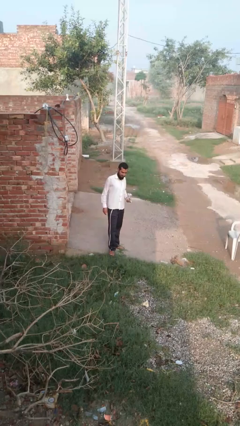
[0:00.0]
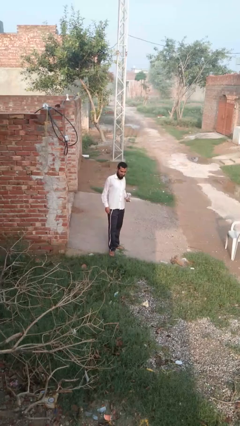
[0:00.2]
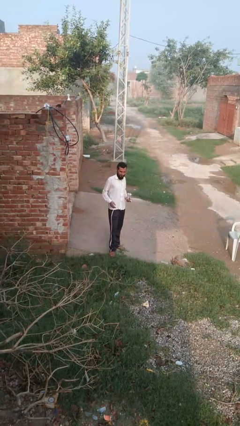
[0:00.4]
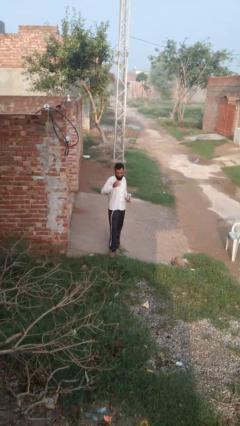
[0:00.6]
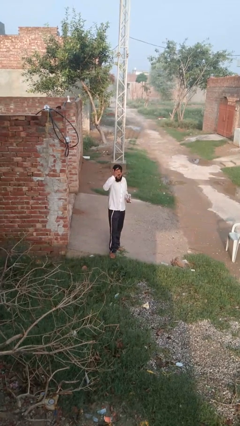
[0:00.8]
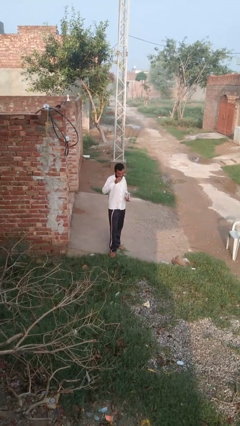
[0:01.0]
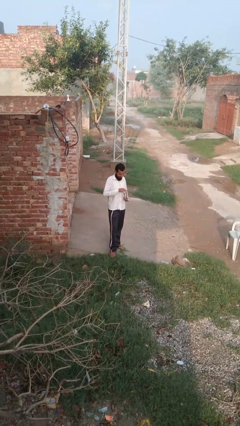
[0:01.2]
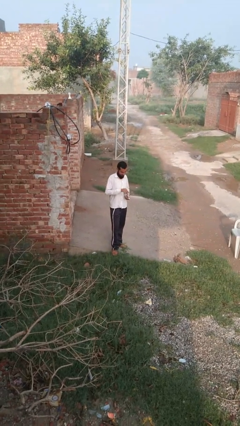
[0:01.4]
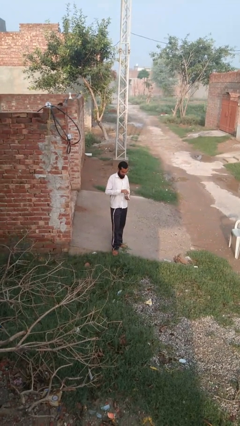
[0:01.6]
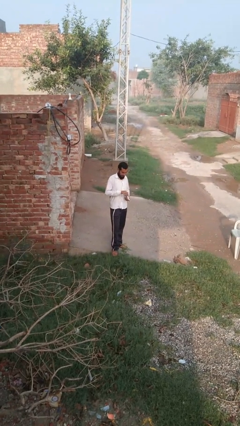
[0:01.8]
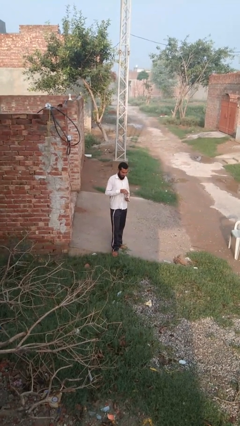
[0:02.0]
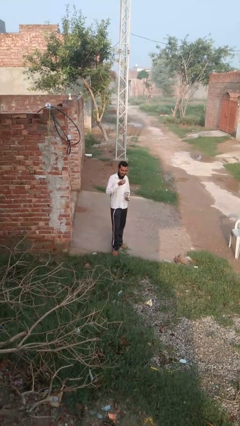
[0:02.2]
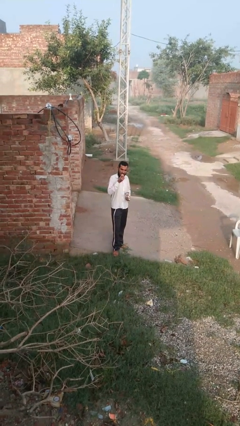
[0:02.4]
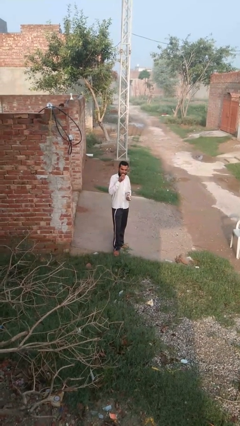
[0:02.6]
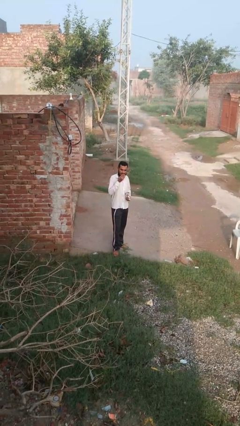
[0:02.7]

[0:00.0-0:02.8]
person eats snack from bag

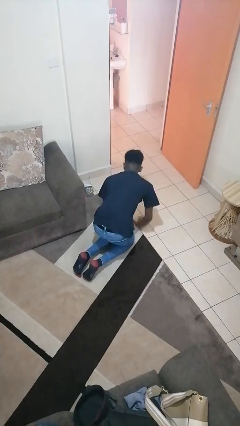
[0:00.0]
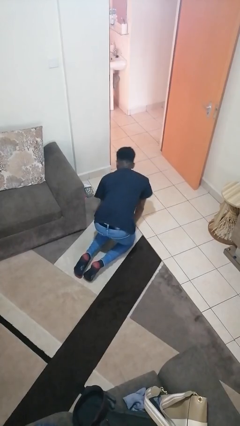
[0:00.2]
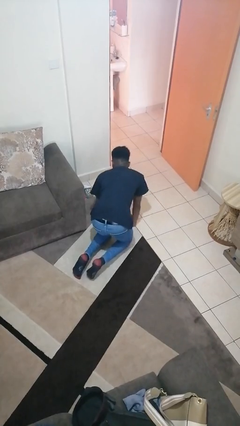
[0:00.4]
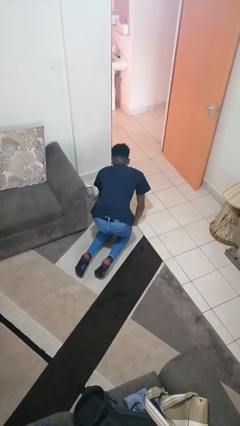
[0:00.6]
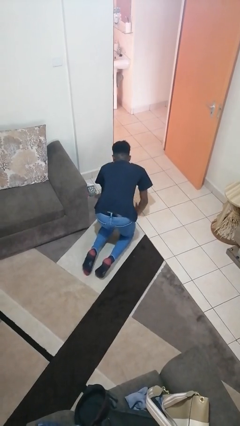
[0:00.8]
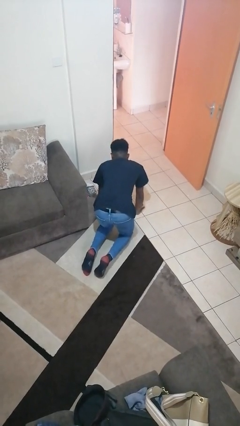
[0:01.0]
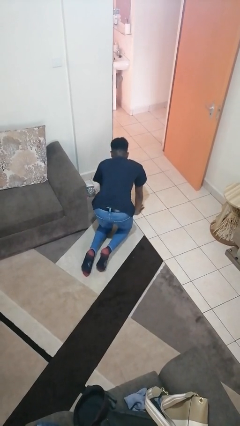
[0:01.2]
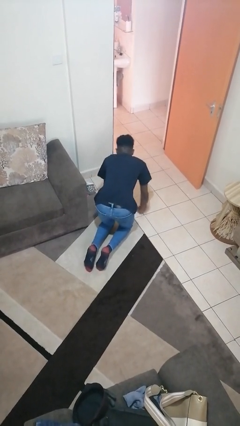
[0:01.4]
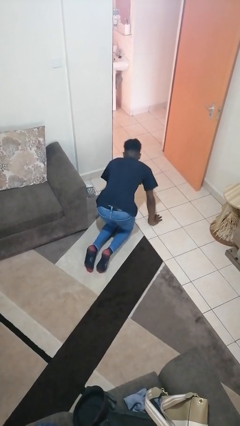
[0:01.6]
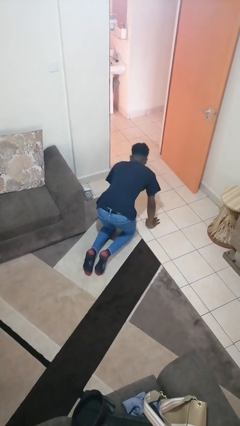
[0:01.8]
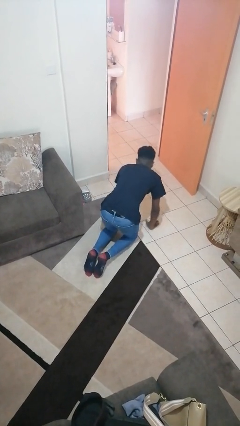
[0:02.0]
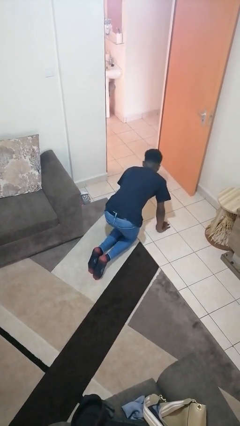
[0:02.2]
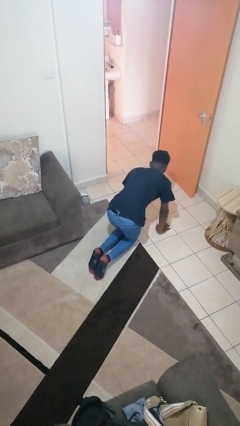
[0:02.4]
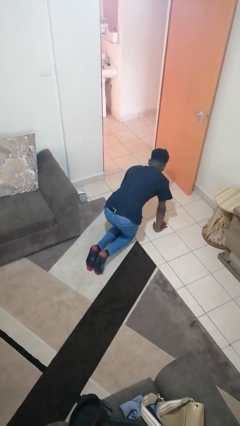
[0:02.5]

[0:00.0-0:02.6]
person crawls

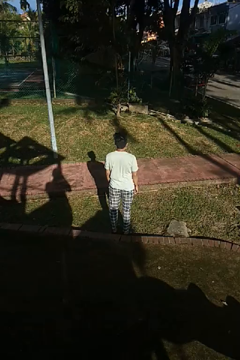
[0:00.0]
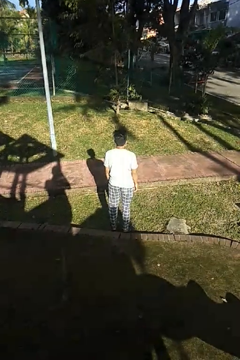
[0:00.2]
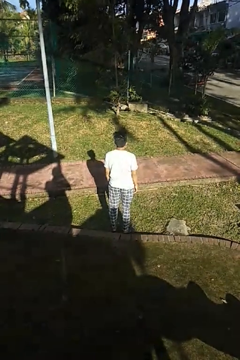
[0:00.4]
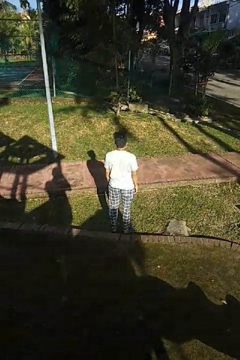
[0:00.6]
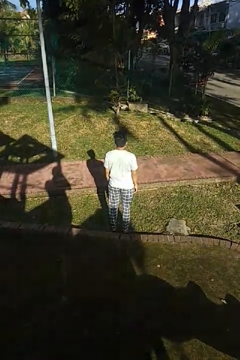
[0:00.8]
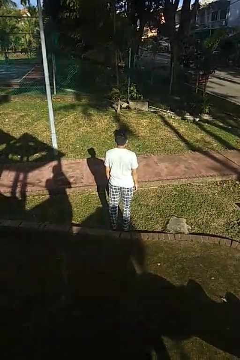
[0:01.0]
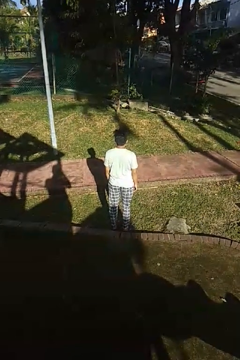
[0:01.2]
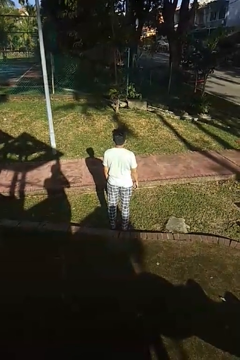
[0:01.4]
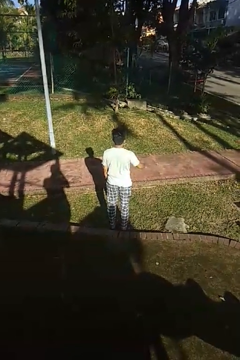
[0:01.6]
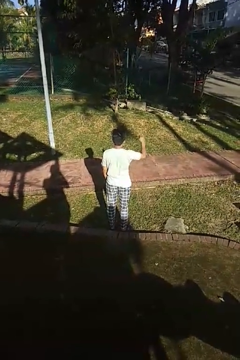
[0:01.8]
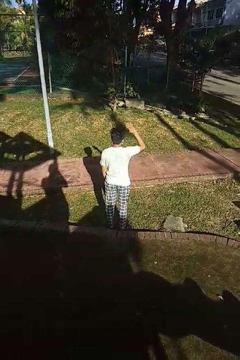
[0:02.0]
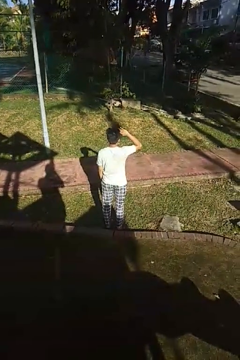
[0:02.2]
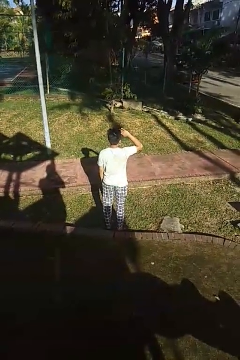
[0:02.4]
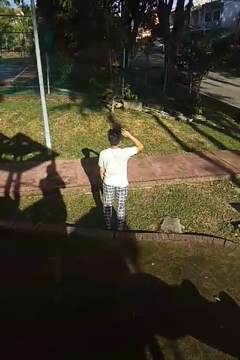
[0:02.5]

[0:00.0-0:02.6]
person salutes

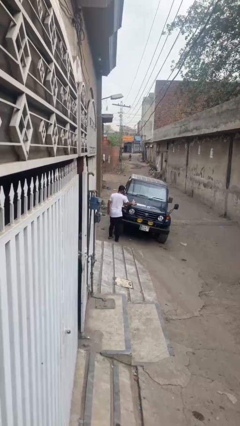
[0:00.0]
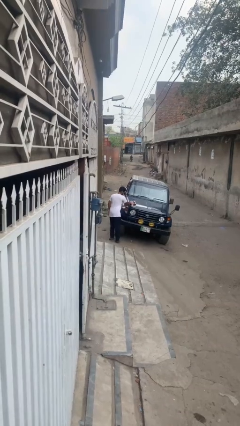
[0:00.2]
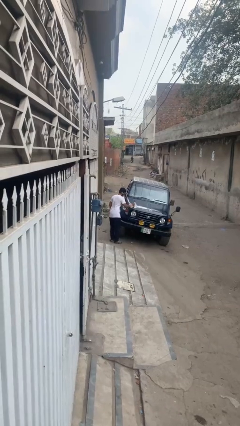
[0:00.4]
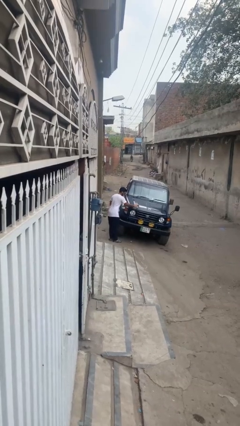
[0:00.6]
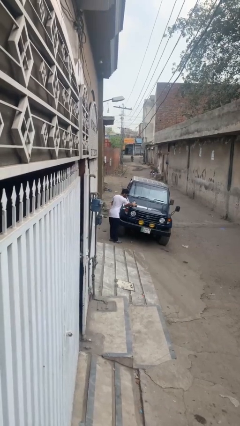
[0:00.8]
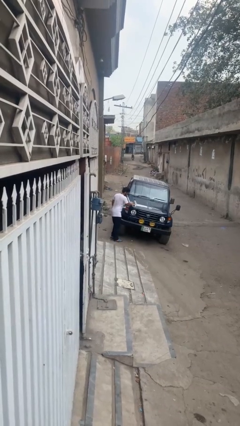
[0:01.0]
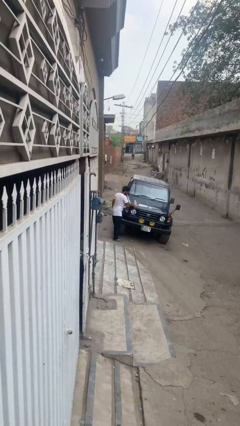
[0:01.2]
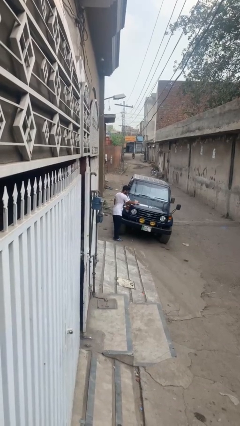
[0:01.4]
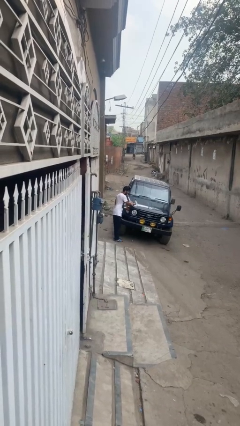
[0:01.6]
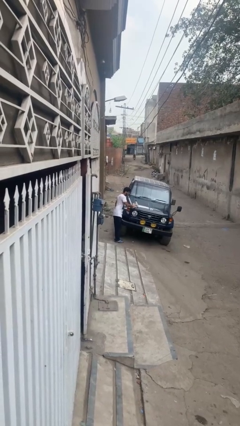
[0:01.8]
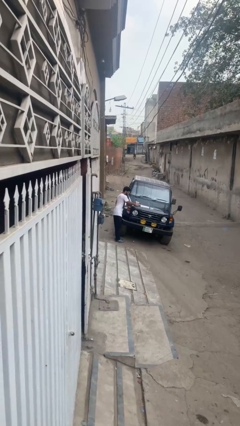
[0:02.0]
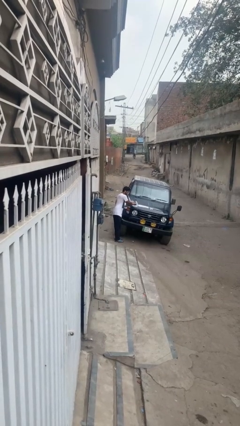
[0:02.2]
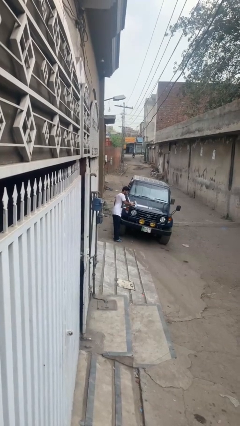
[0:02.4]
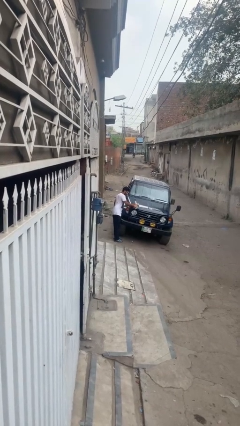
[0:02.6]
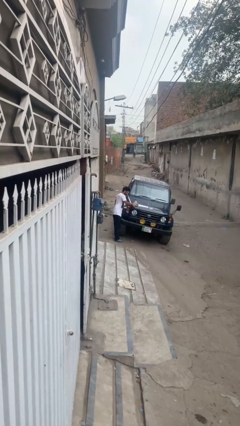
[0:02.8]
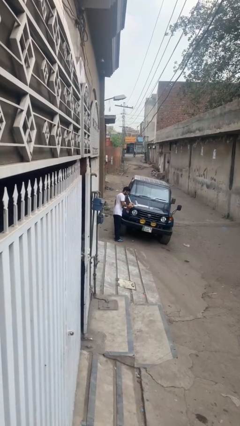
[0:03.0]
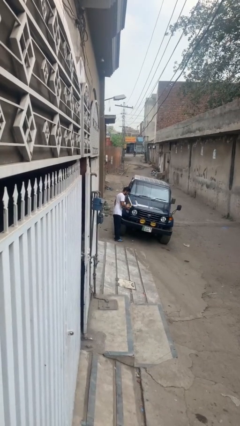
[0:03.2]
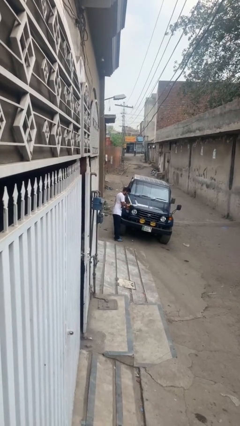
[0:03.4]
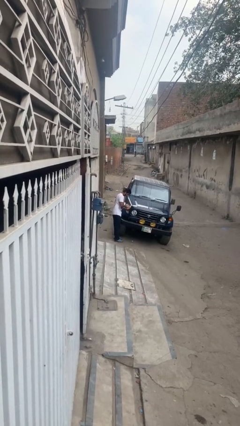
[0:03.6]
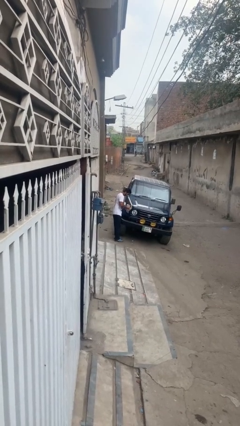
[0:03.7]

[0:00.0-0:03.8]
person polishes car with rag

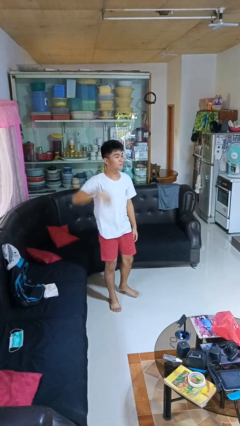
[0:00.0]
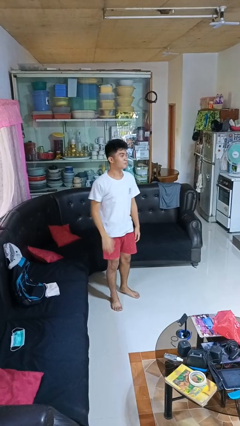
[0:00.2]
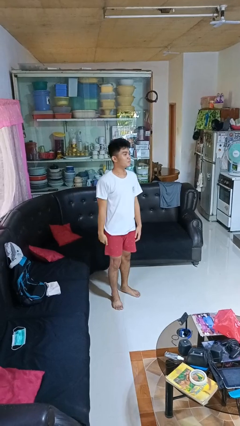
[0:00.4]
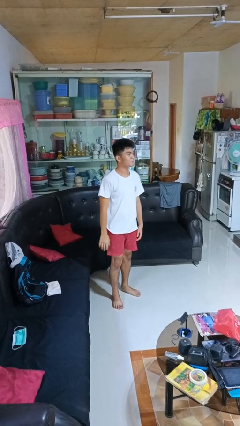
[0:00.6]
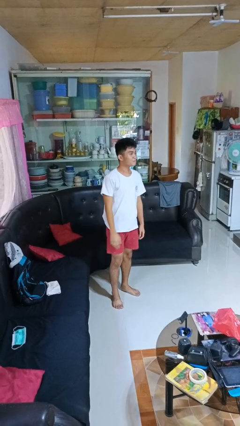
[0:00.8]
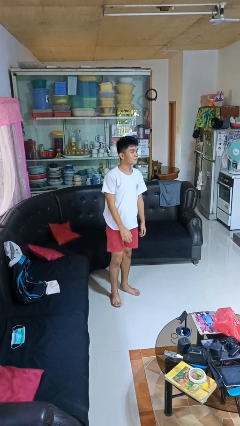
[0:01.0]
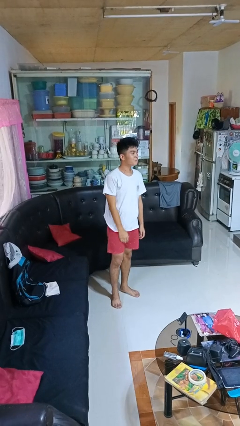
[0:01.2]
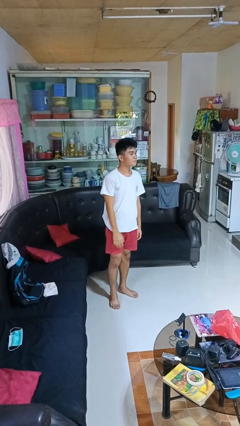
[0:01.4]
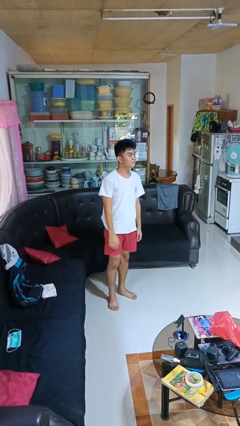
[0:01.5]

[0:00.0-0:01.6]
person gestures lower hand

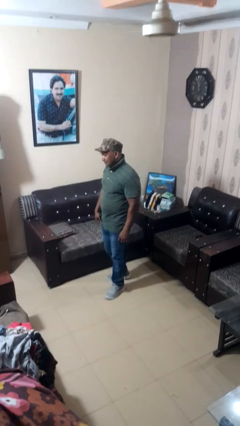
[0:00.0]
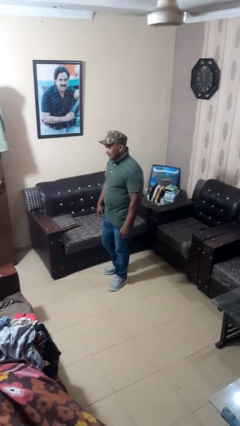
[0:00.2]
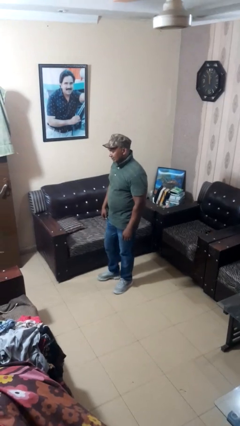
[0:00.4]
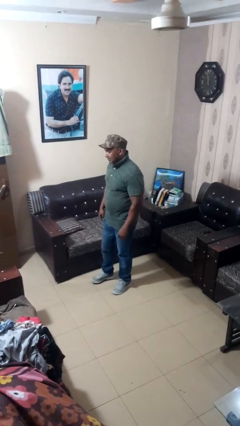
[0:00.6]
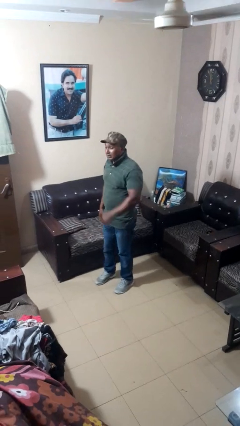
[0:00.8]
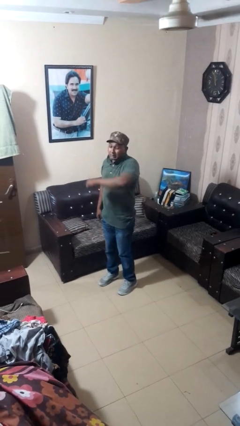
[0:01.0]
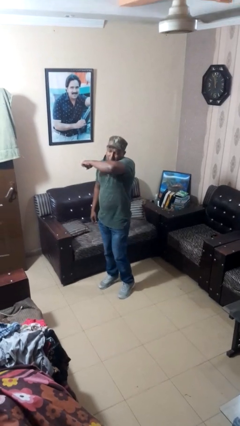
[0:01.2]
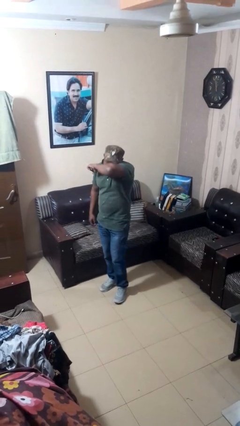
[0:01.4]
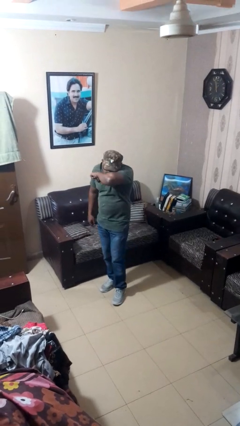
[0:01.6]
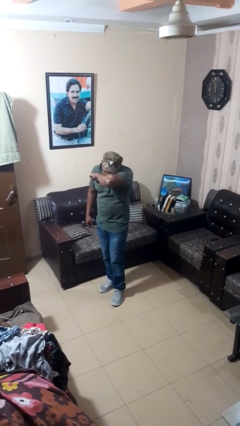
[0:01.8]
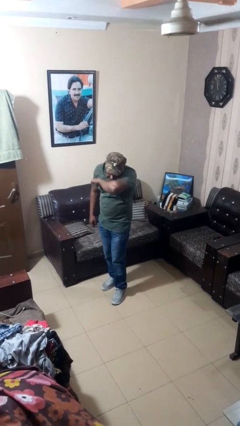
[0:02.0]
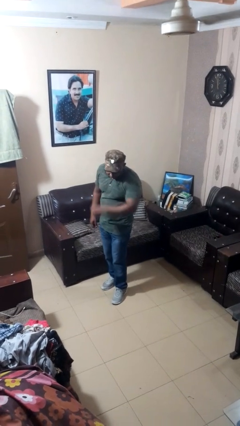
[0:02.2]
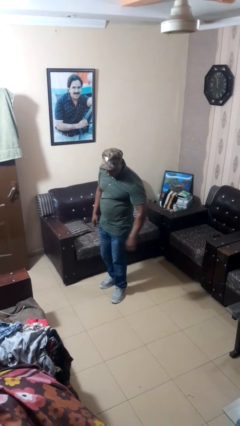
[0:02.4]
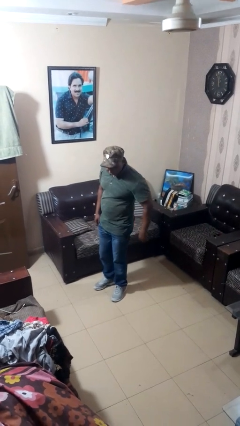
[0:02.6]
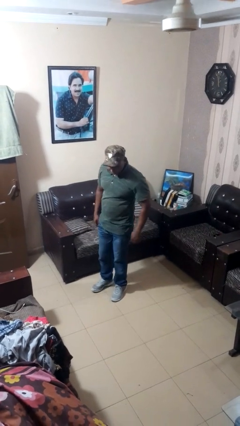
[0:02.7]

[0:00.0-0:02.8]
person sneezes into arm

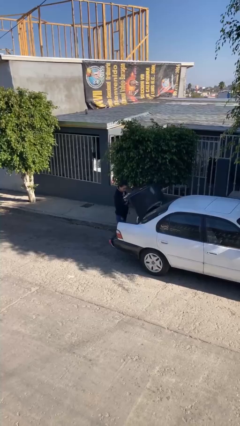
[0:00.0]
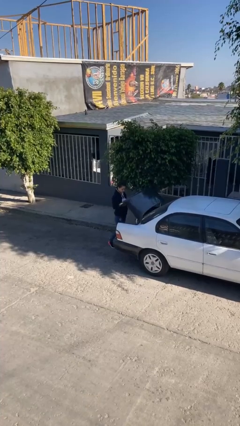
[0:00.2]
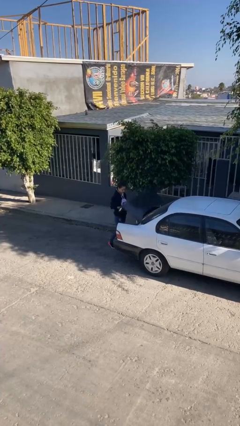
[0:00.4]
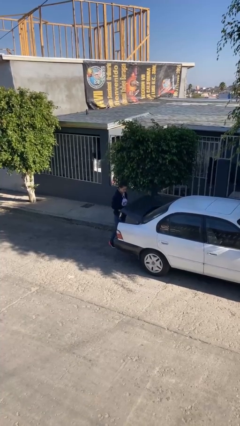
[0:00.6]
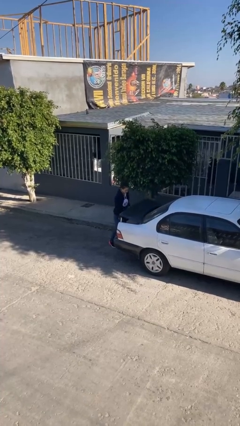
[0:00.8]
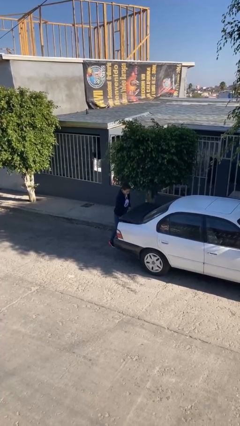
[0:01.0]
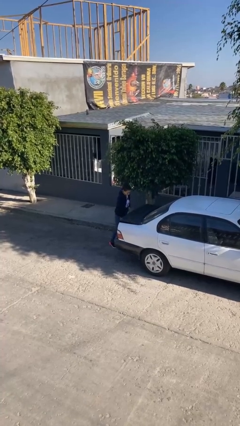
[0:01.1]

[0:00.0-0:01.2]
person closes car trunk
